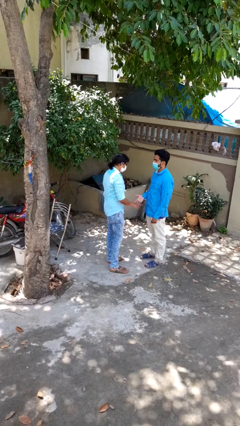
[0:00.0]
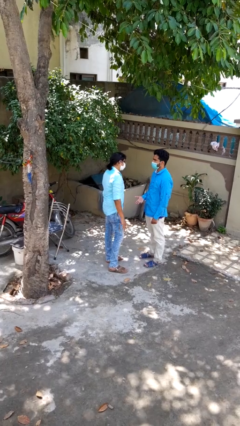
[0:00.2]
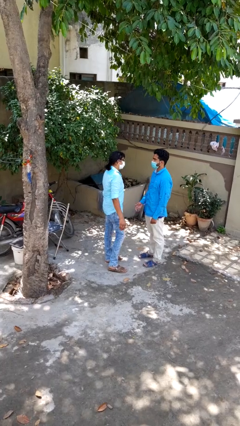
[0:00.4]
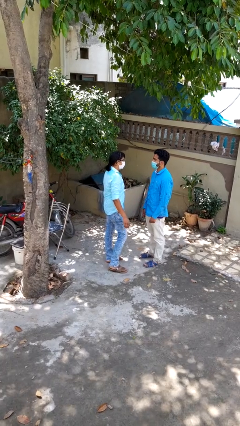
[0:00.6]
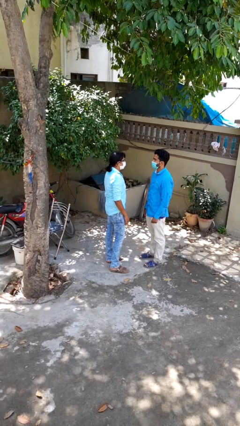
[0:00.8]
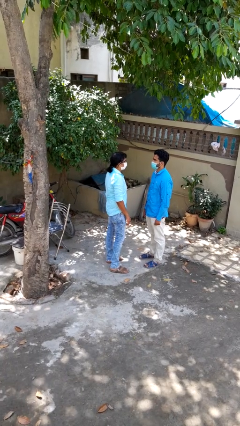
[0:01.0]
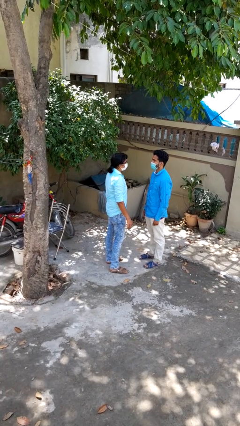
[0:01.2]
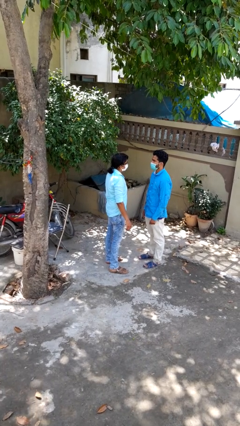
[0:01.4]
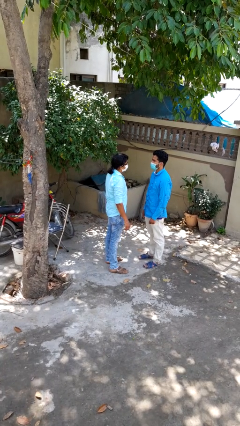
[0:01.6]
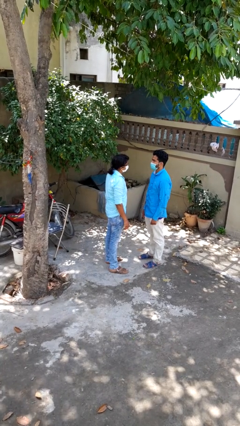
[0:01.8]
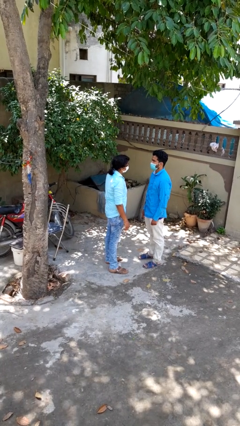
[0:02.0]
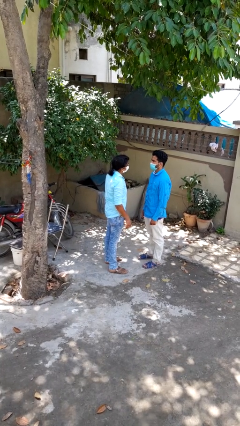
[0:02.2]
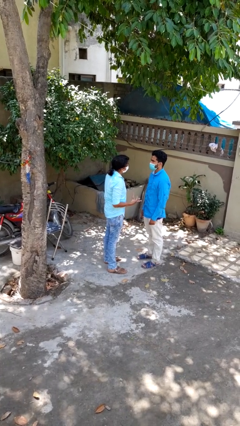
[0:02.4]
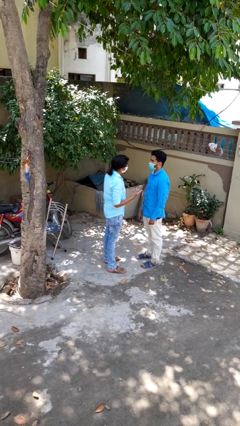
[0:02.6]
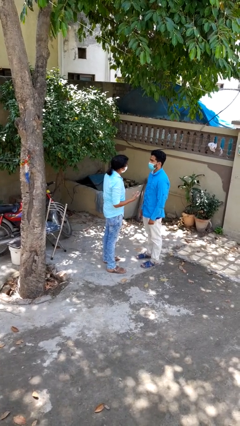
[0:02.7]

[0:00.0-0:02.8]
person highfives hand

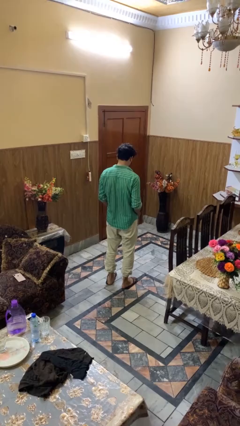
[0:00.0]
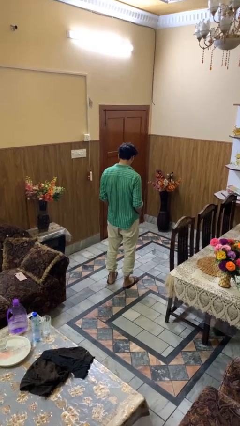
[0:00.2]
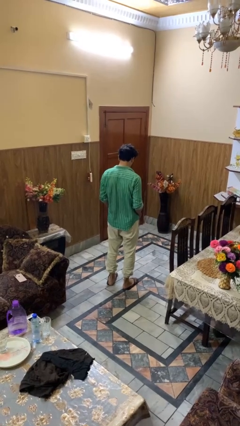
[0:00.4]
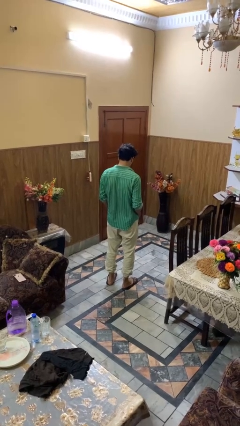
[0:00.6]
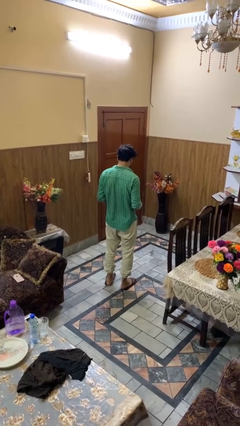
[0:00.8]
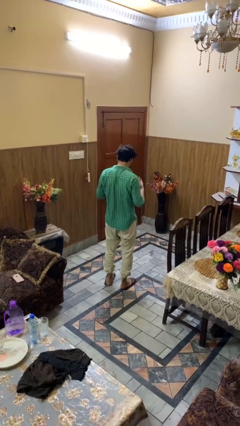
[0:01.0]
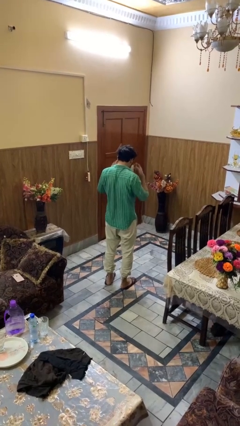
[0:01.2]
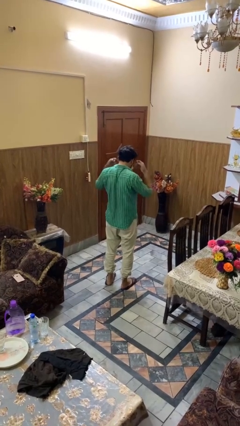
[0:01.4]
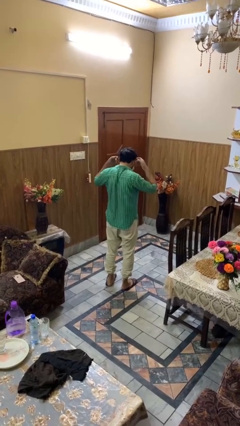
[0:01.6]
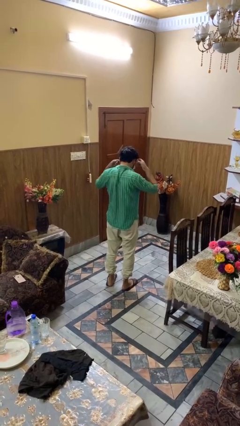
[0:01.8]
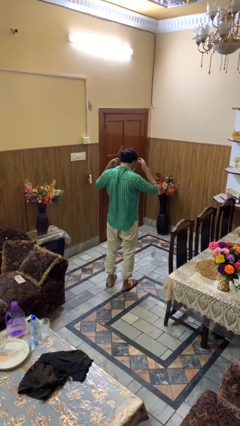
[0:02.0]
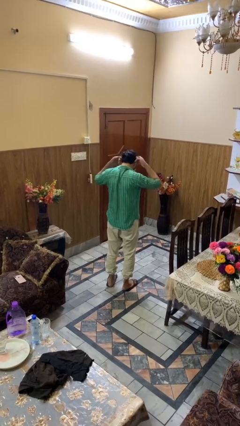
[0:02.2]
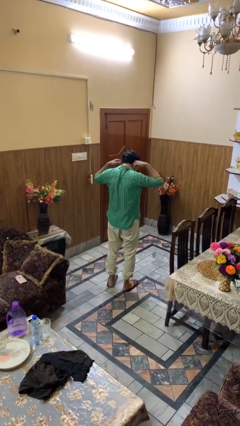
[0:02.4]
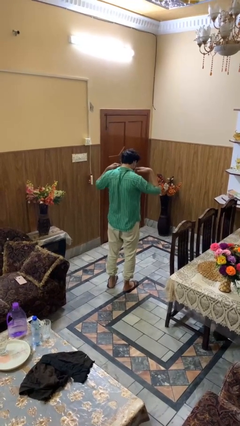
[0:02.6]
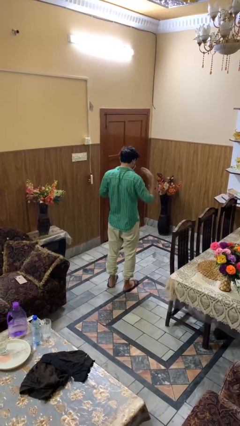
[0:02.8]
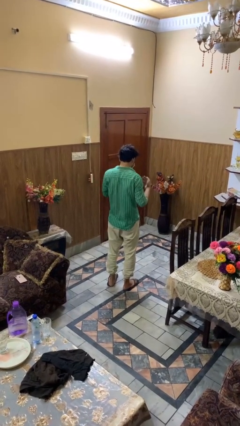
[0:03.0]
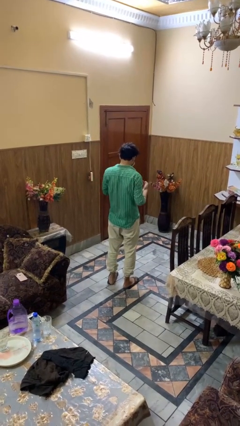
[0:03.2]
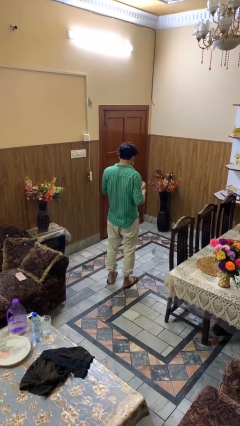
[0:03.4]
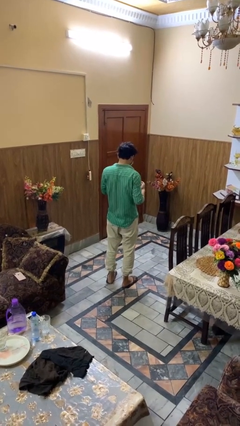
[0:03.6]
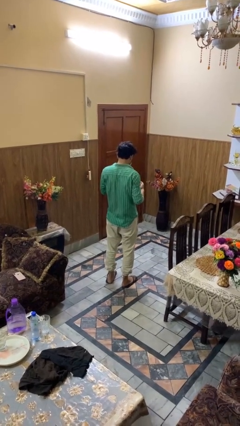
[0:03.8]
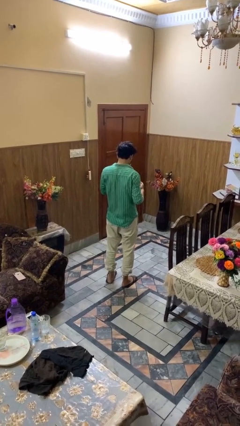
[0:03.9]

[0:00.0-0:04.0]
person puts on facemask

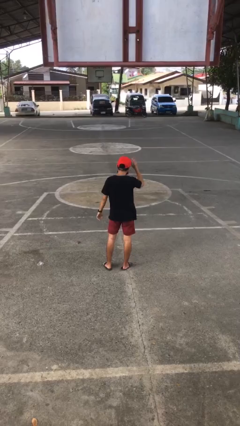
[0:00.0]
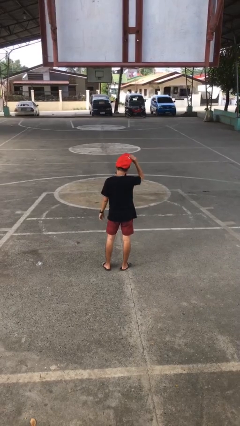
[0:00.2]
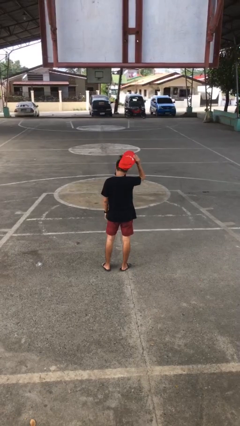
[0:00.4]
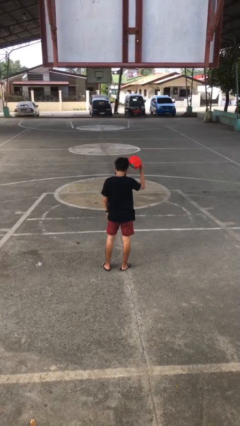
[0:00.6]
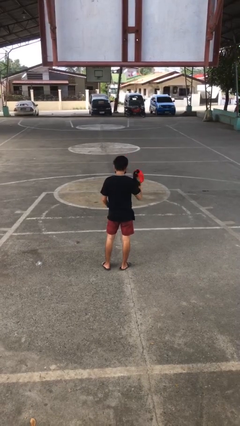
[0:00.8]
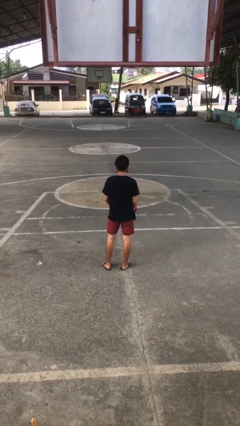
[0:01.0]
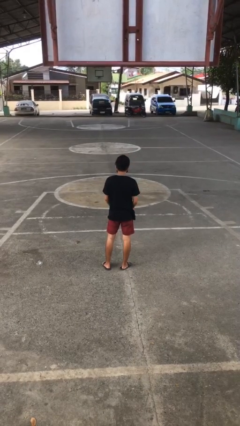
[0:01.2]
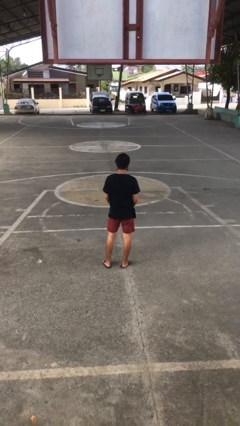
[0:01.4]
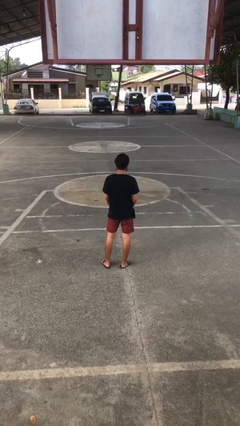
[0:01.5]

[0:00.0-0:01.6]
person takes off hat

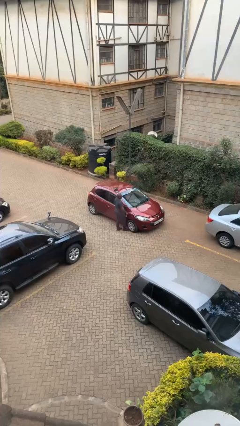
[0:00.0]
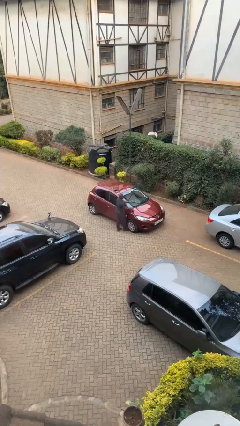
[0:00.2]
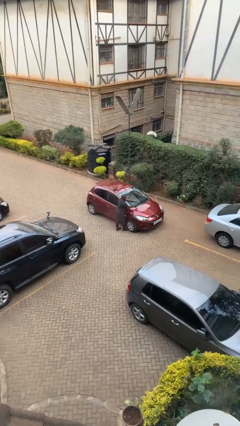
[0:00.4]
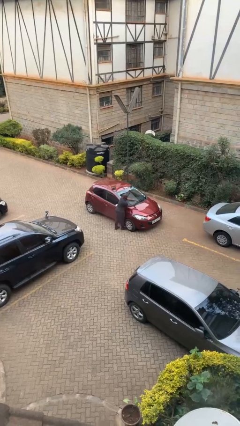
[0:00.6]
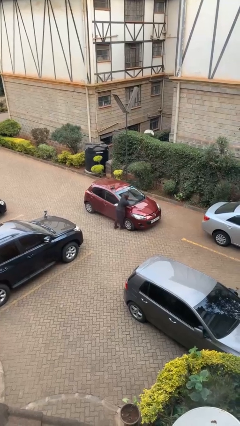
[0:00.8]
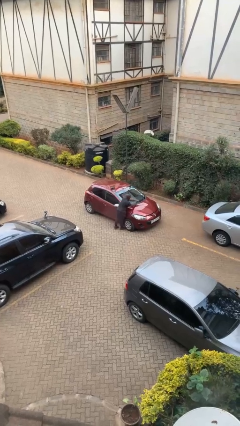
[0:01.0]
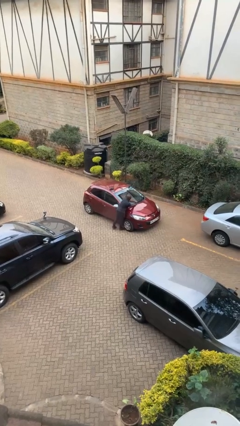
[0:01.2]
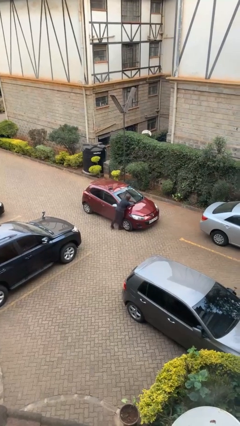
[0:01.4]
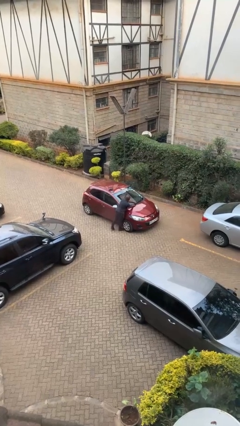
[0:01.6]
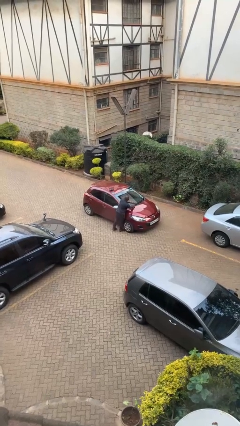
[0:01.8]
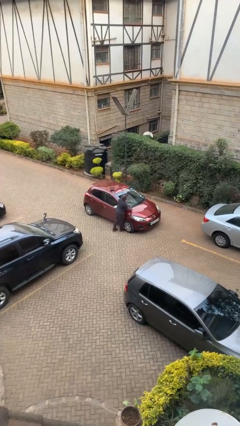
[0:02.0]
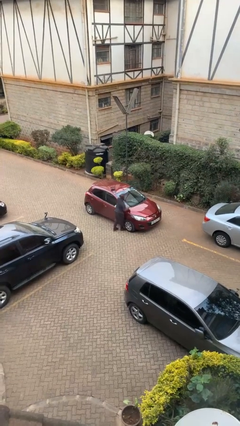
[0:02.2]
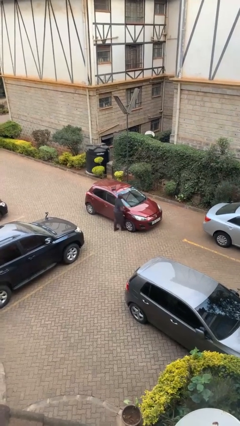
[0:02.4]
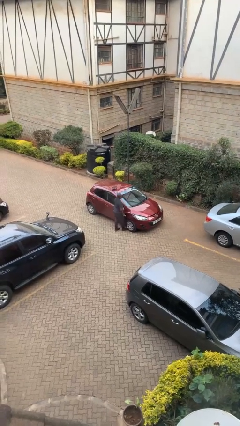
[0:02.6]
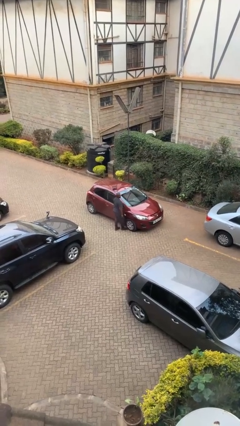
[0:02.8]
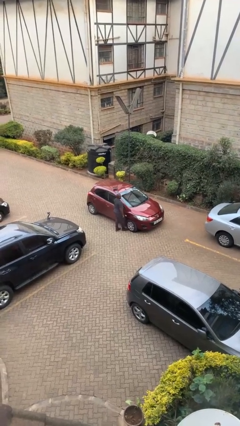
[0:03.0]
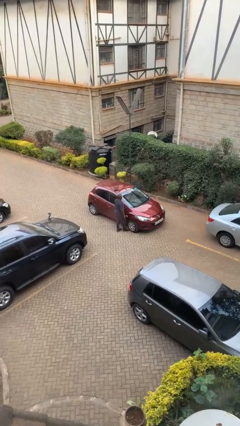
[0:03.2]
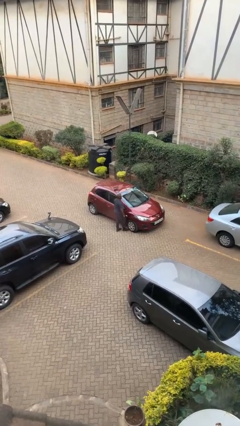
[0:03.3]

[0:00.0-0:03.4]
person flips down car wipers

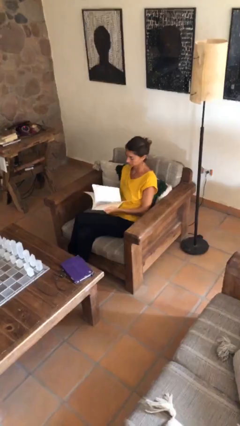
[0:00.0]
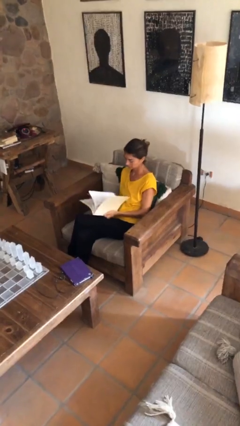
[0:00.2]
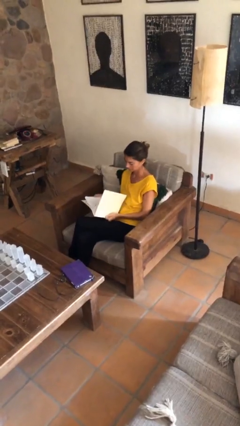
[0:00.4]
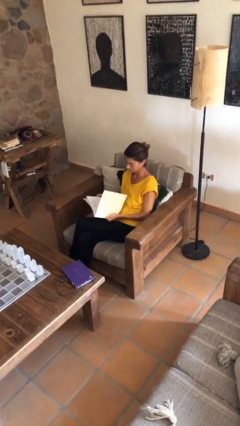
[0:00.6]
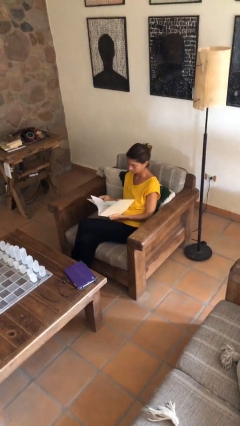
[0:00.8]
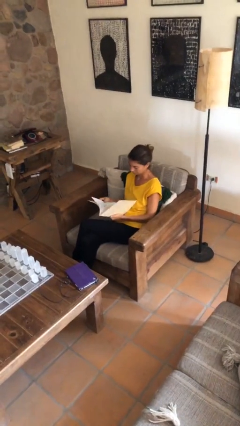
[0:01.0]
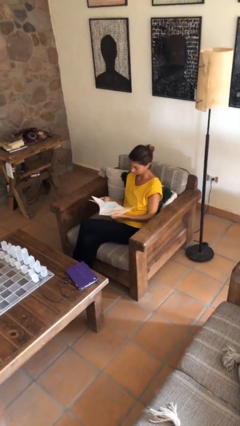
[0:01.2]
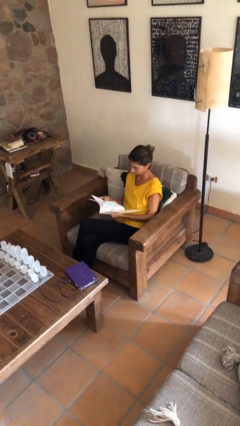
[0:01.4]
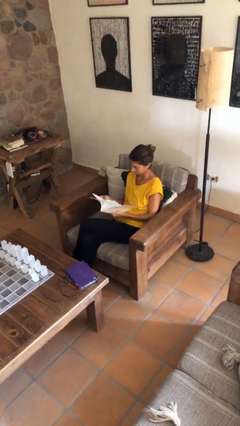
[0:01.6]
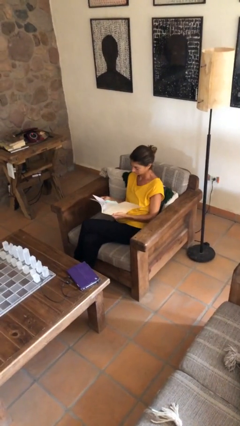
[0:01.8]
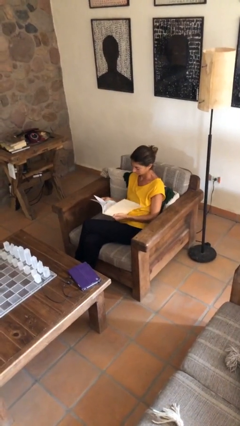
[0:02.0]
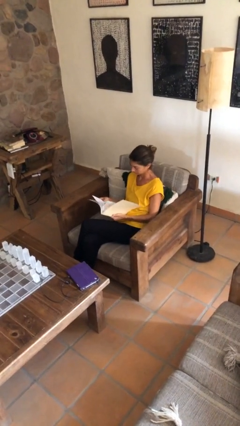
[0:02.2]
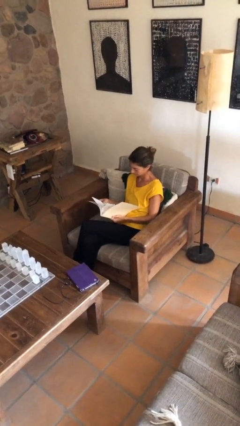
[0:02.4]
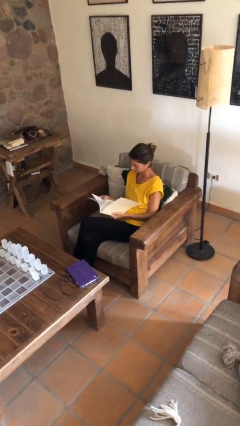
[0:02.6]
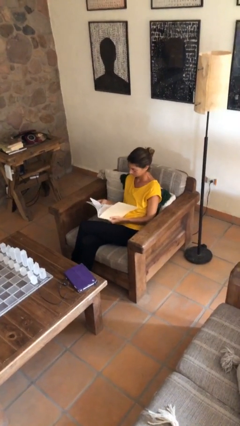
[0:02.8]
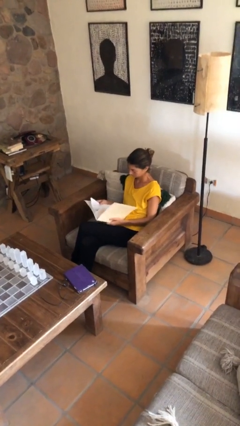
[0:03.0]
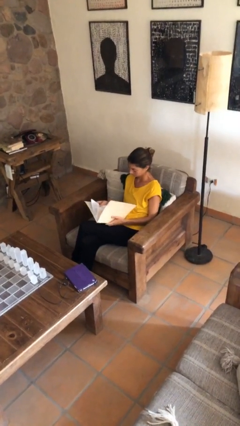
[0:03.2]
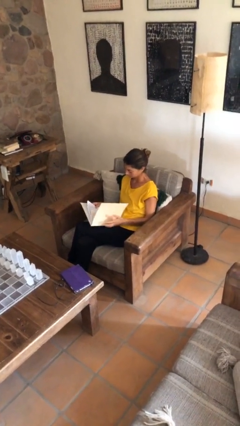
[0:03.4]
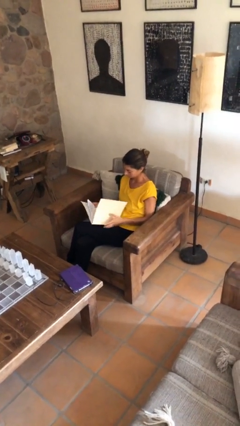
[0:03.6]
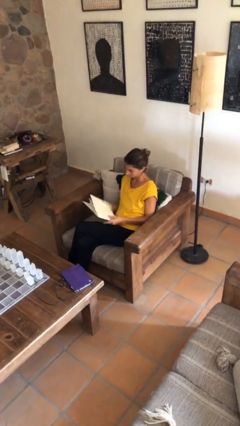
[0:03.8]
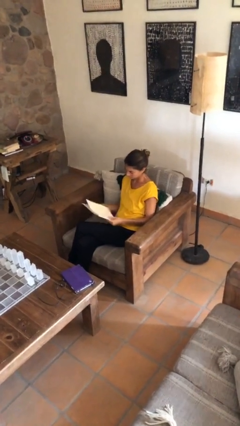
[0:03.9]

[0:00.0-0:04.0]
person reads document

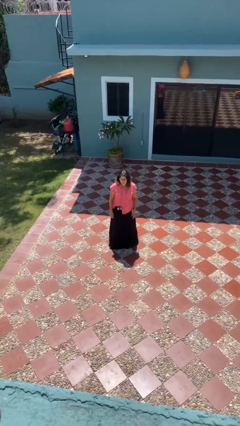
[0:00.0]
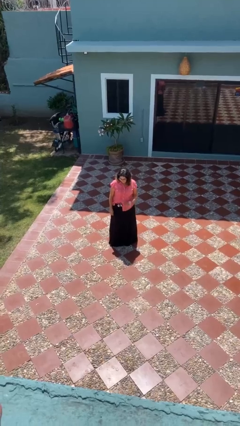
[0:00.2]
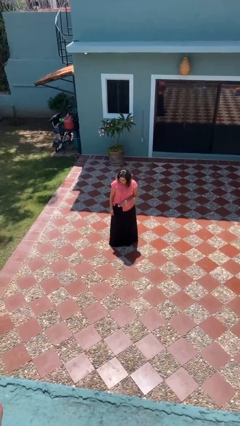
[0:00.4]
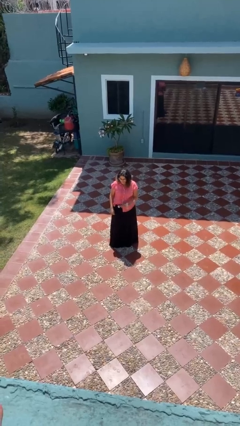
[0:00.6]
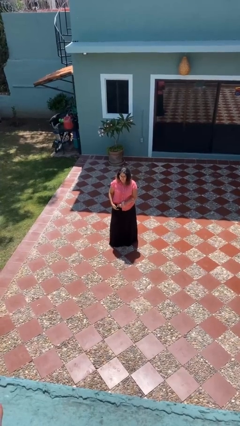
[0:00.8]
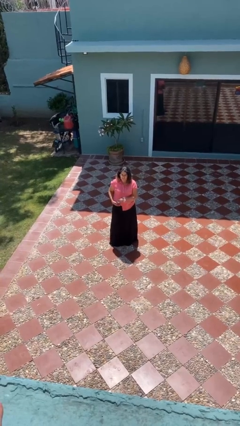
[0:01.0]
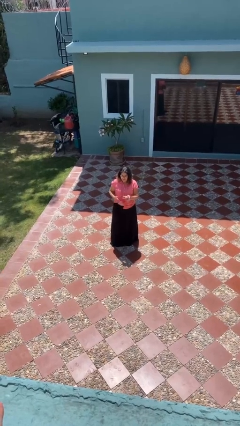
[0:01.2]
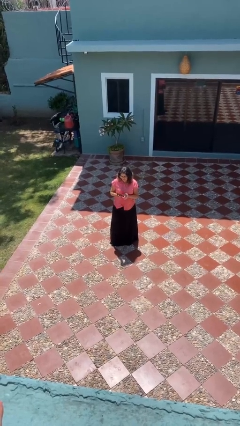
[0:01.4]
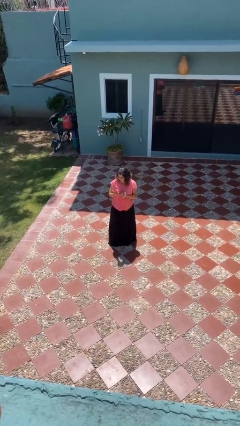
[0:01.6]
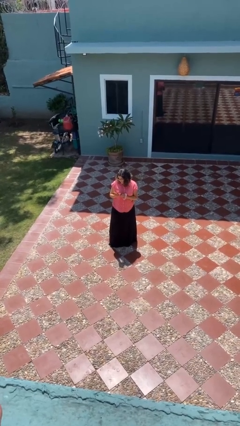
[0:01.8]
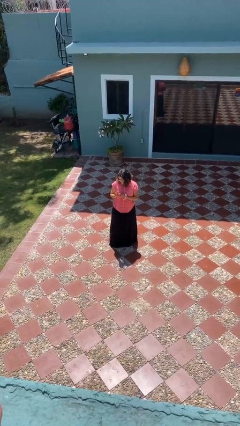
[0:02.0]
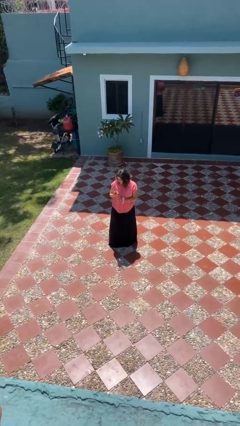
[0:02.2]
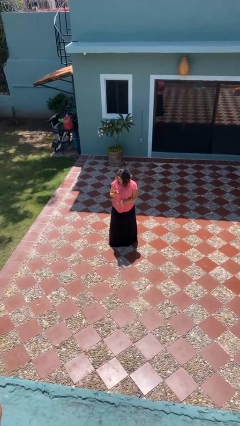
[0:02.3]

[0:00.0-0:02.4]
person takes phone from pocket
